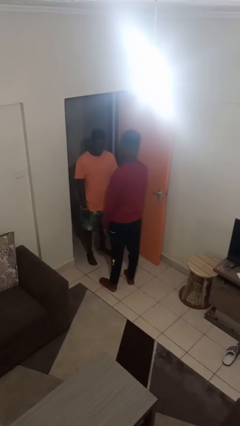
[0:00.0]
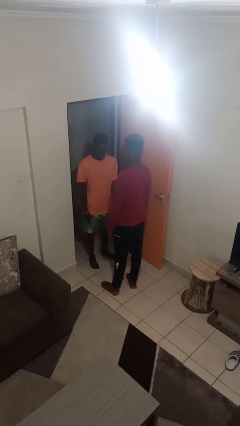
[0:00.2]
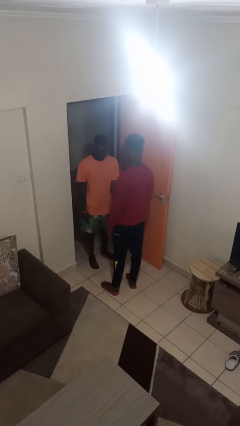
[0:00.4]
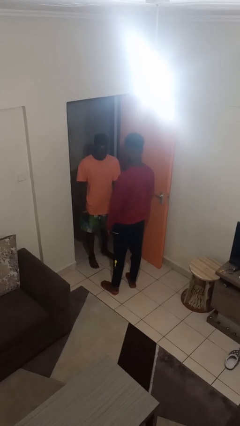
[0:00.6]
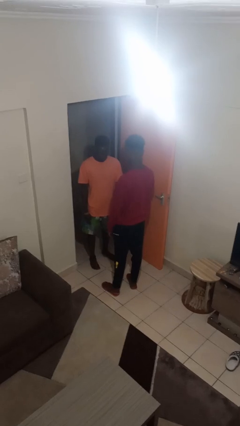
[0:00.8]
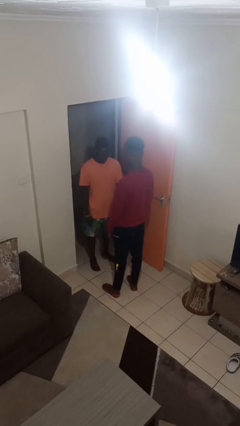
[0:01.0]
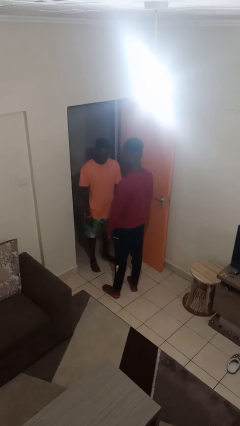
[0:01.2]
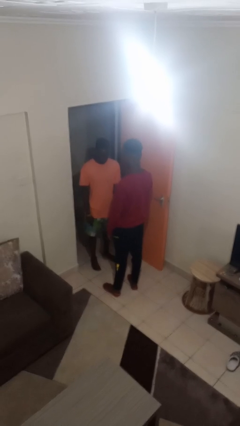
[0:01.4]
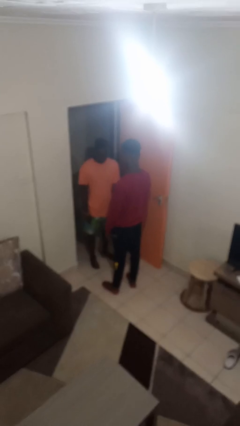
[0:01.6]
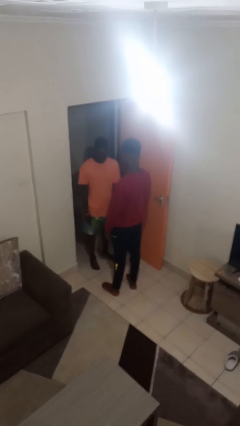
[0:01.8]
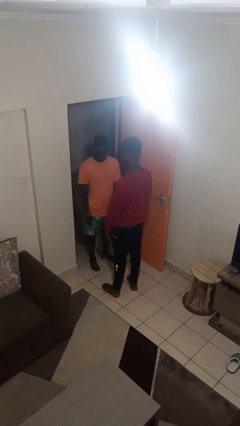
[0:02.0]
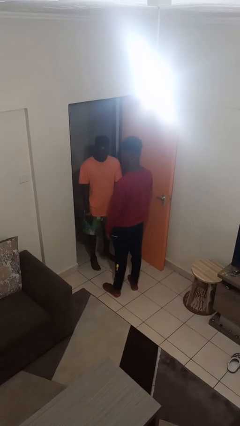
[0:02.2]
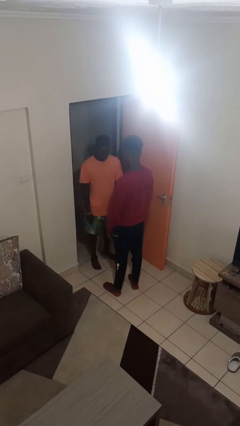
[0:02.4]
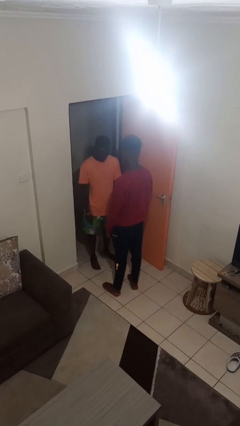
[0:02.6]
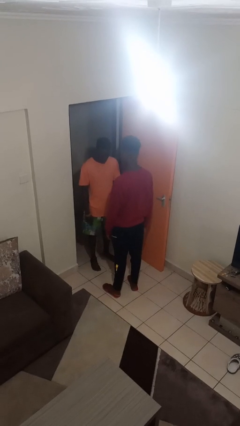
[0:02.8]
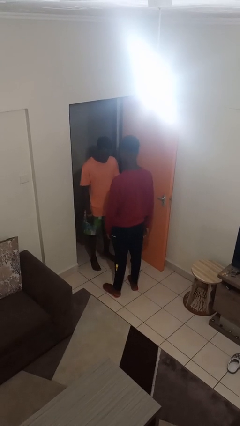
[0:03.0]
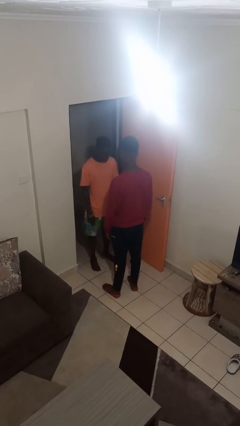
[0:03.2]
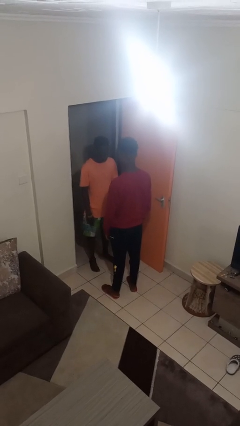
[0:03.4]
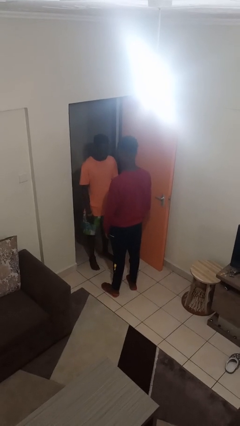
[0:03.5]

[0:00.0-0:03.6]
person grabs person by forearm

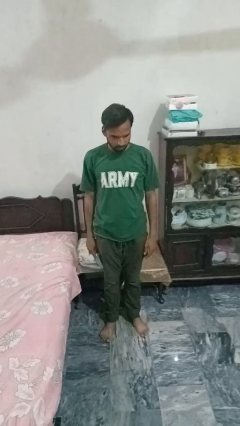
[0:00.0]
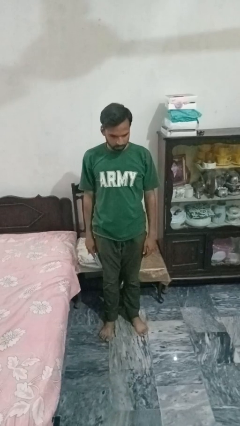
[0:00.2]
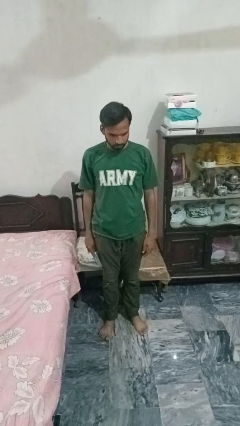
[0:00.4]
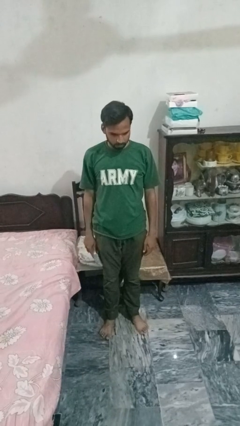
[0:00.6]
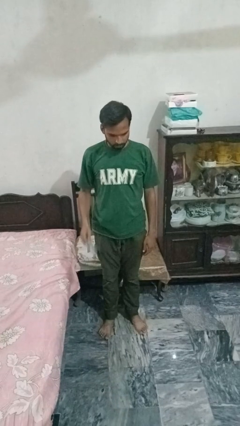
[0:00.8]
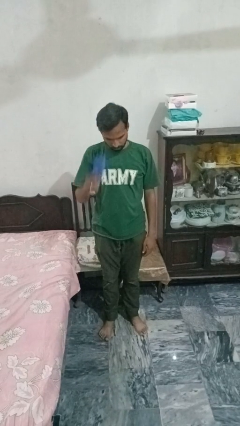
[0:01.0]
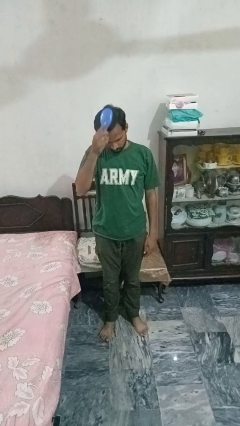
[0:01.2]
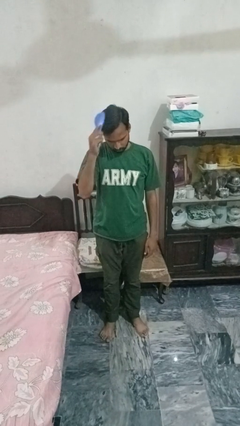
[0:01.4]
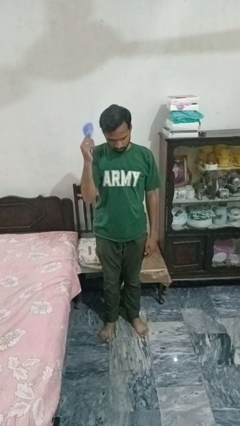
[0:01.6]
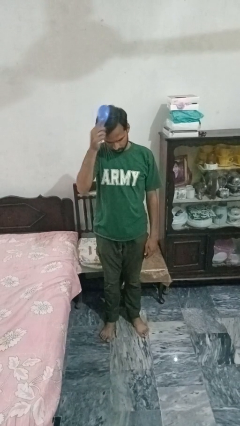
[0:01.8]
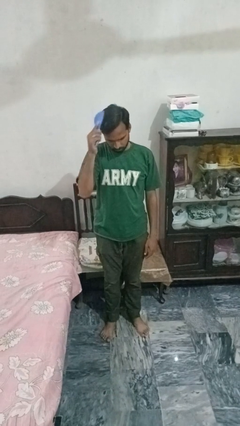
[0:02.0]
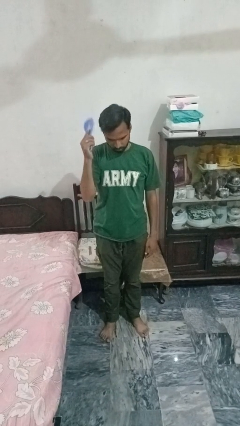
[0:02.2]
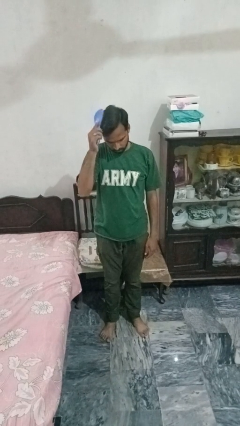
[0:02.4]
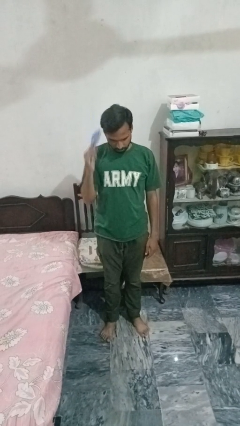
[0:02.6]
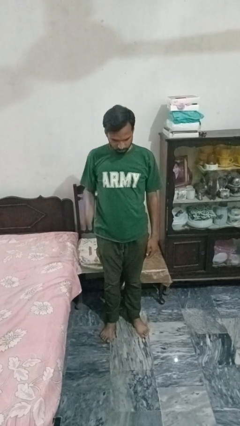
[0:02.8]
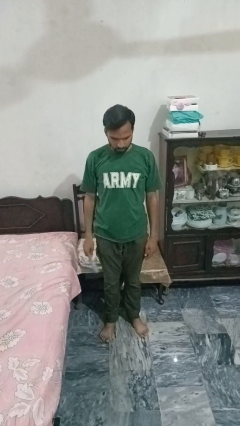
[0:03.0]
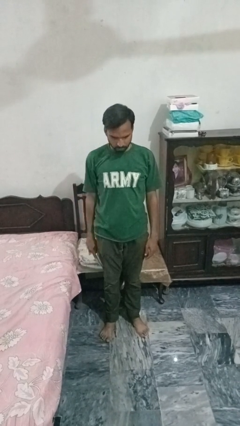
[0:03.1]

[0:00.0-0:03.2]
person brushes hair

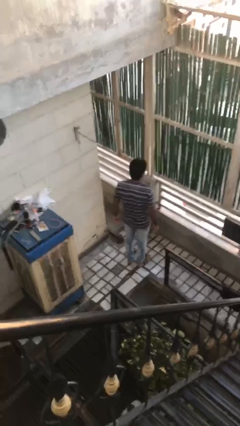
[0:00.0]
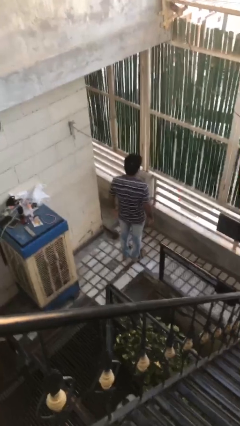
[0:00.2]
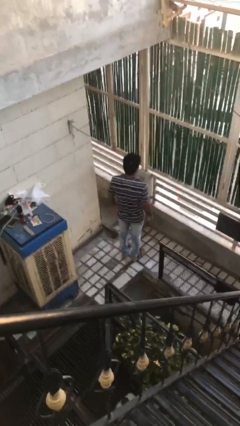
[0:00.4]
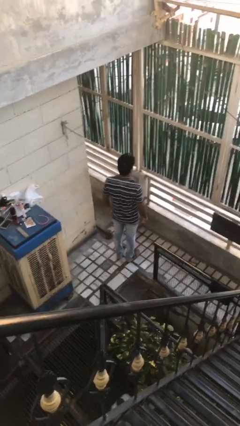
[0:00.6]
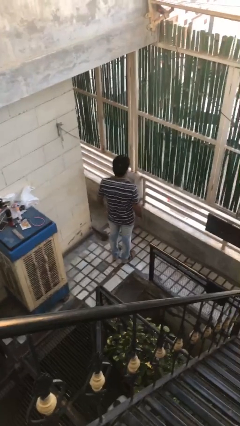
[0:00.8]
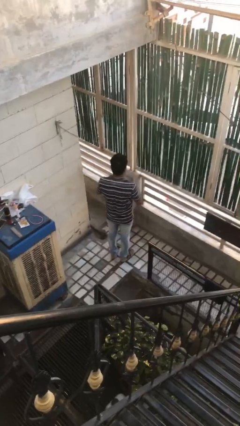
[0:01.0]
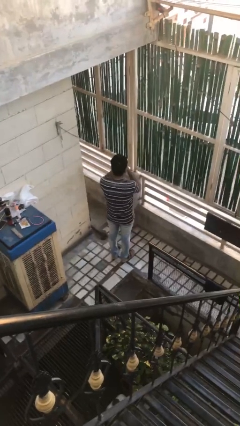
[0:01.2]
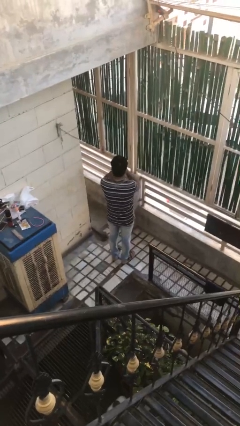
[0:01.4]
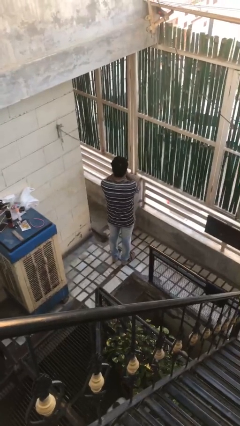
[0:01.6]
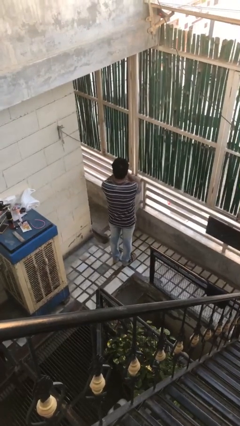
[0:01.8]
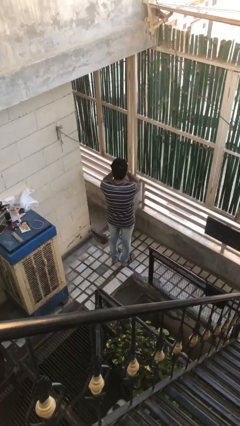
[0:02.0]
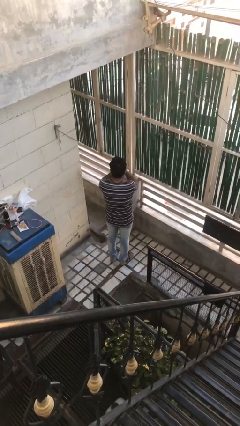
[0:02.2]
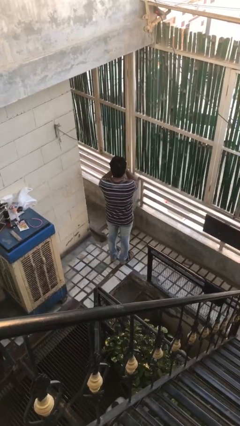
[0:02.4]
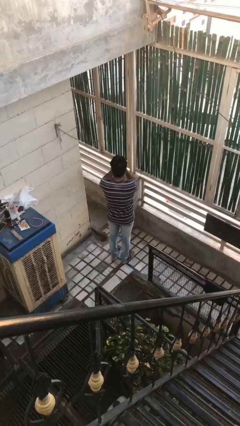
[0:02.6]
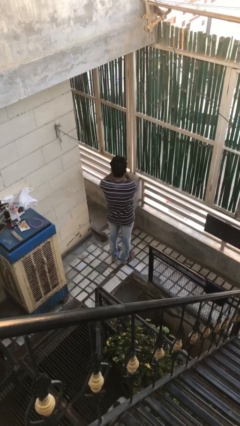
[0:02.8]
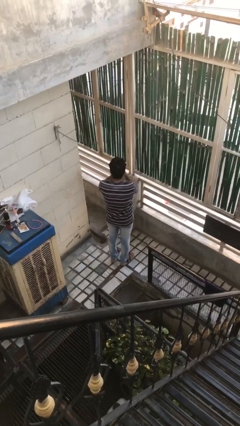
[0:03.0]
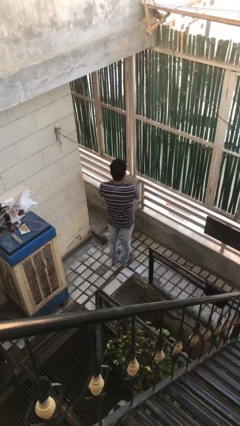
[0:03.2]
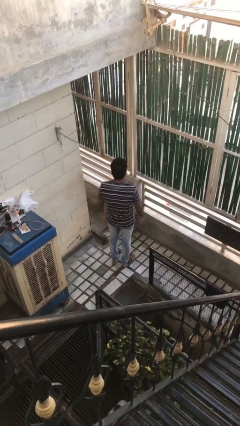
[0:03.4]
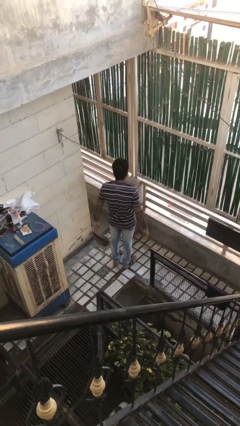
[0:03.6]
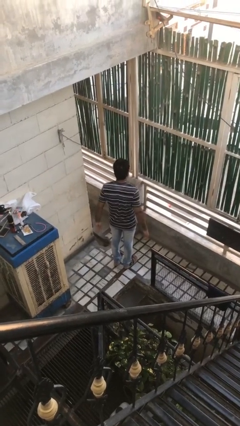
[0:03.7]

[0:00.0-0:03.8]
person snaps fingers

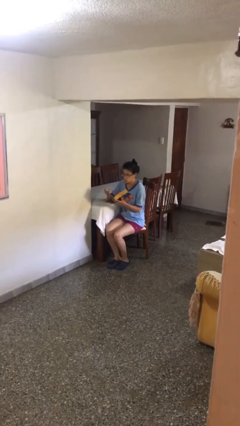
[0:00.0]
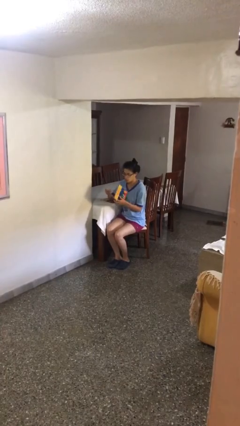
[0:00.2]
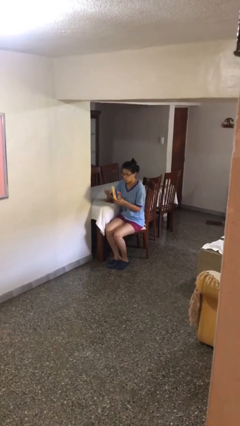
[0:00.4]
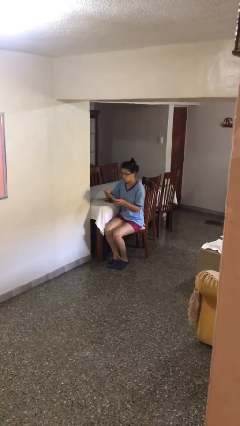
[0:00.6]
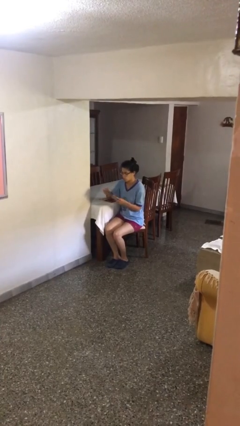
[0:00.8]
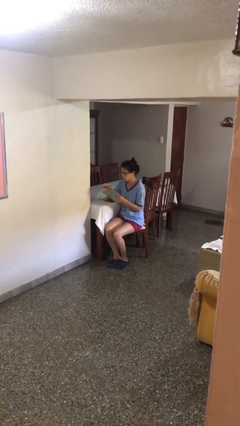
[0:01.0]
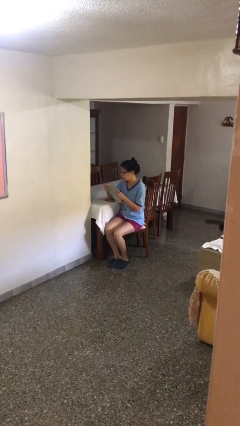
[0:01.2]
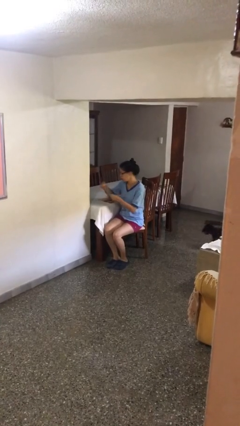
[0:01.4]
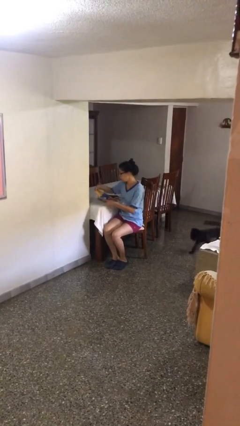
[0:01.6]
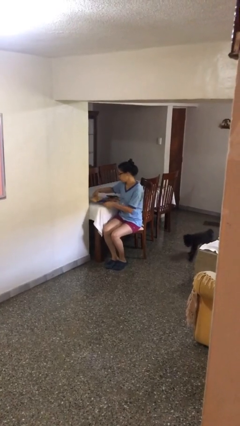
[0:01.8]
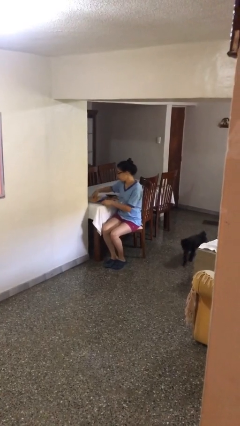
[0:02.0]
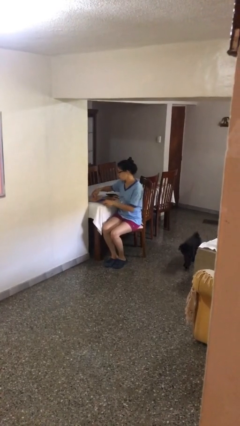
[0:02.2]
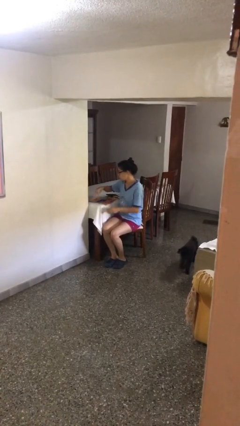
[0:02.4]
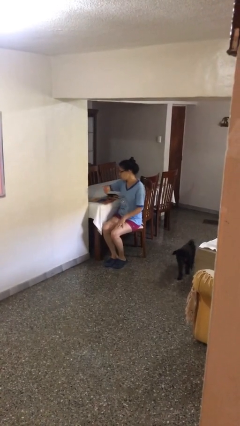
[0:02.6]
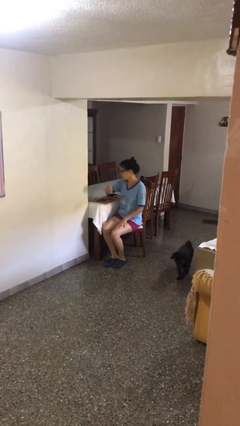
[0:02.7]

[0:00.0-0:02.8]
person puts down object on table

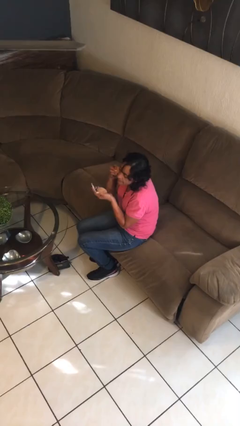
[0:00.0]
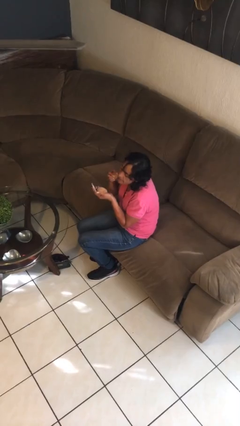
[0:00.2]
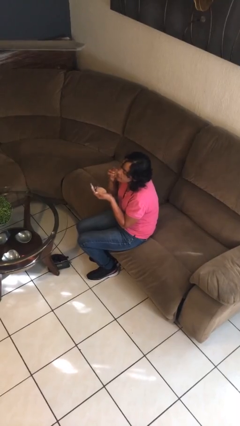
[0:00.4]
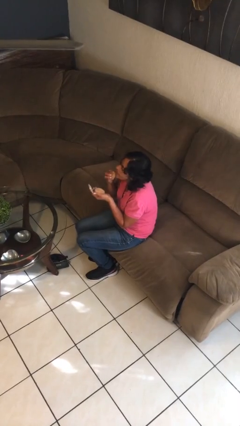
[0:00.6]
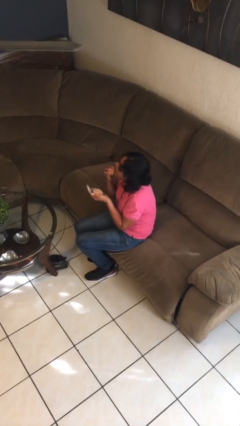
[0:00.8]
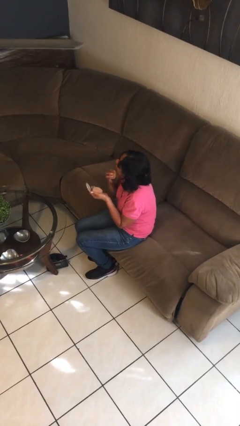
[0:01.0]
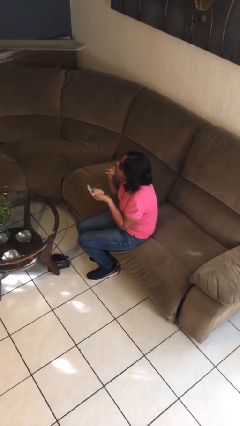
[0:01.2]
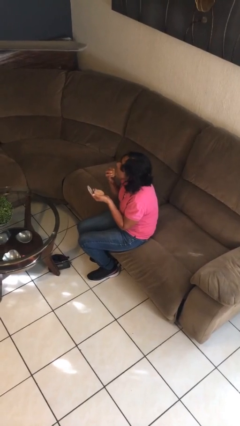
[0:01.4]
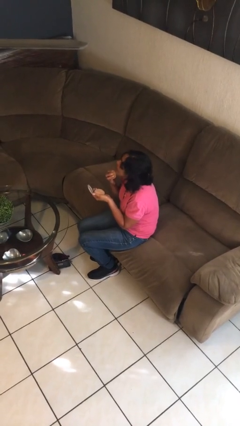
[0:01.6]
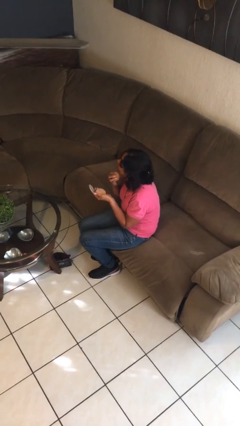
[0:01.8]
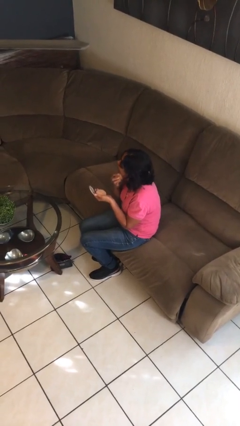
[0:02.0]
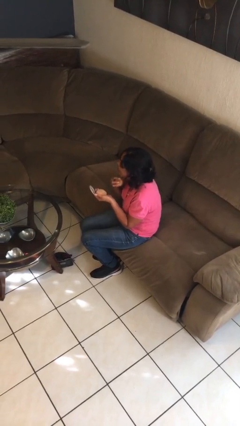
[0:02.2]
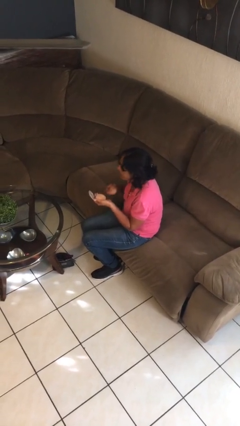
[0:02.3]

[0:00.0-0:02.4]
person applies foundation makeup

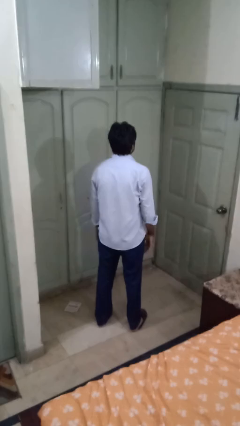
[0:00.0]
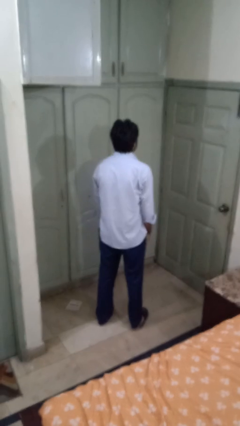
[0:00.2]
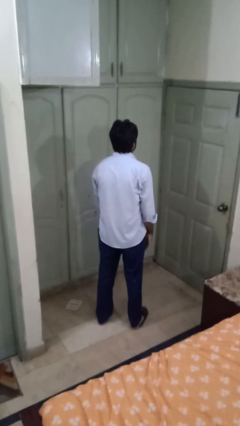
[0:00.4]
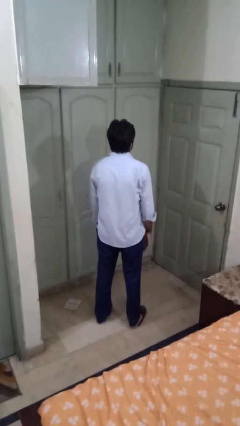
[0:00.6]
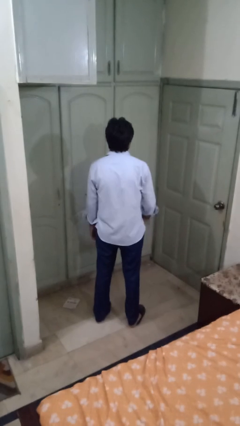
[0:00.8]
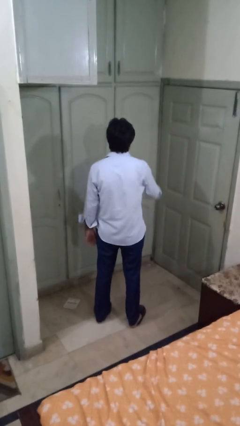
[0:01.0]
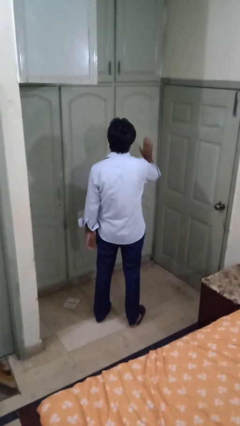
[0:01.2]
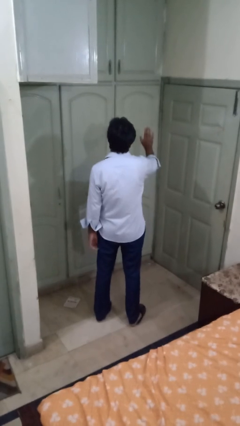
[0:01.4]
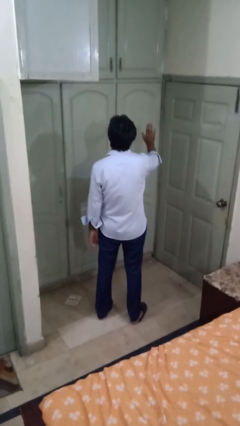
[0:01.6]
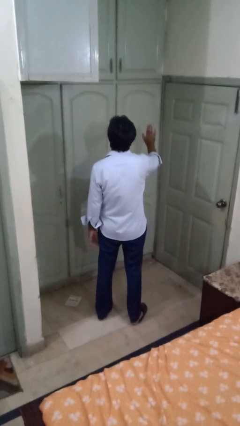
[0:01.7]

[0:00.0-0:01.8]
person gestures stop
